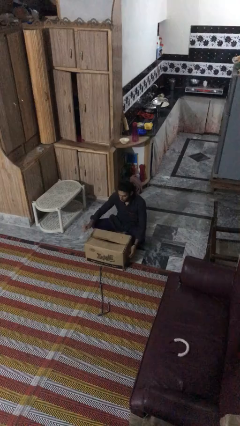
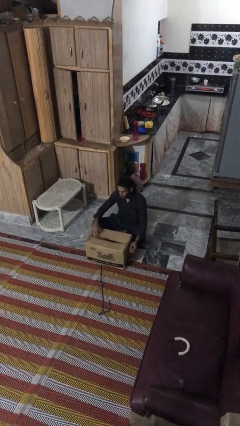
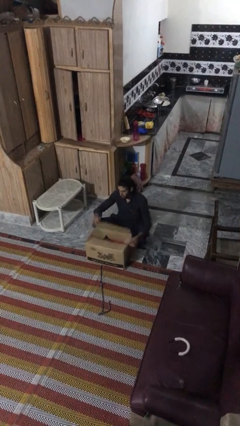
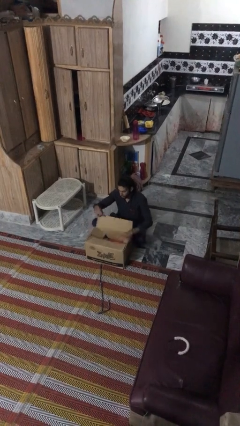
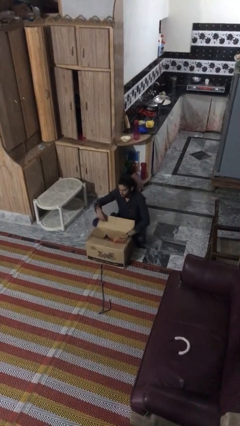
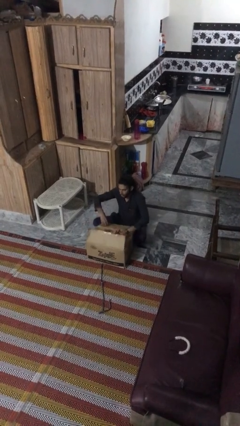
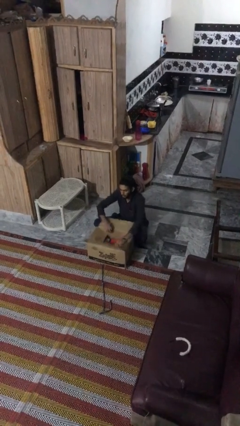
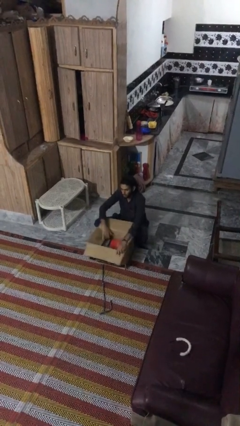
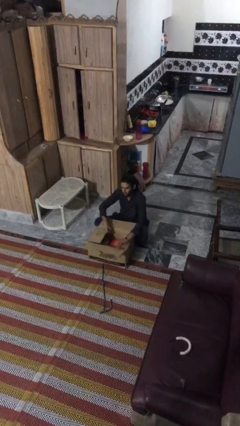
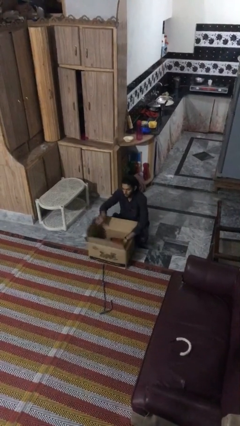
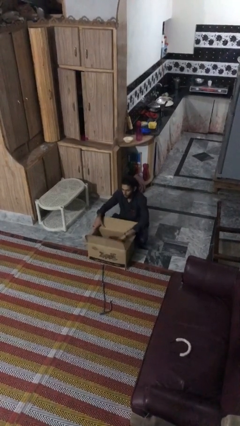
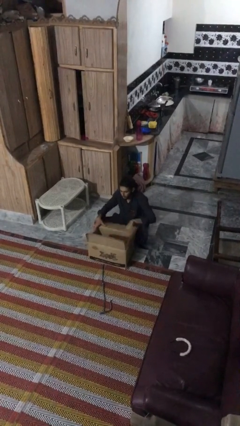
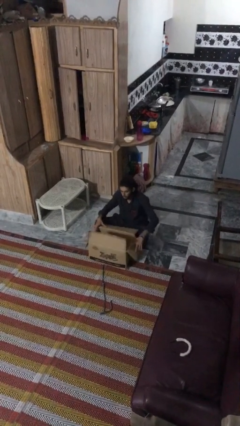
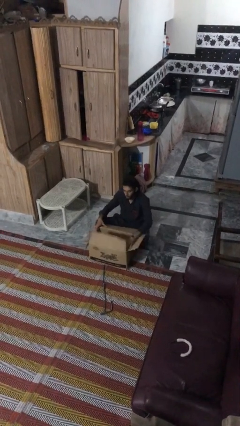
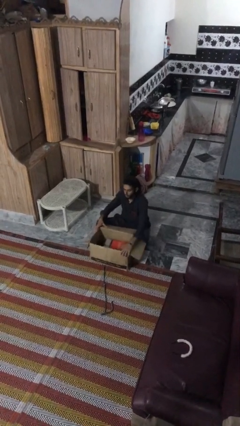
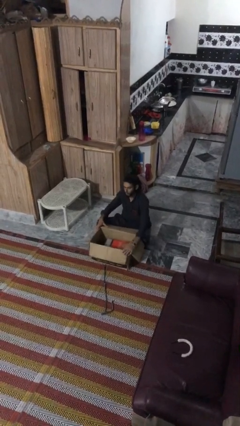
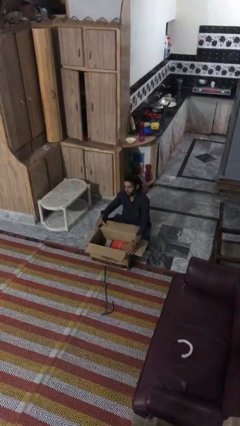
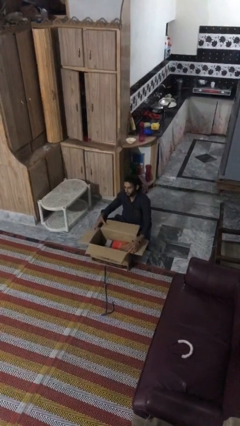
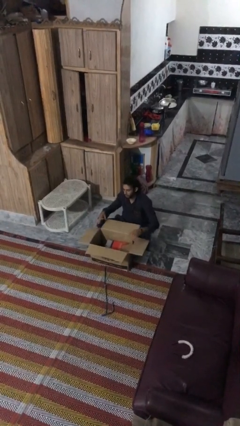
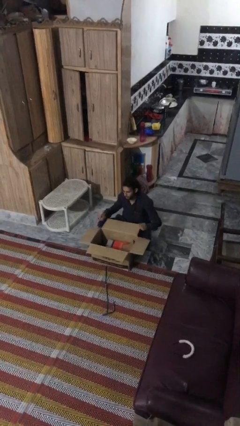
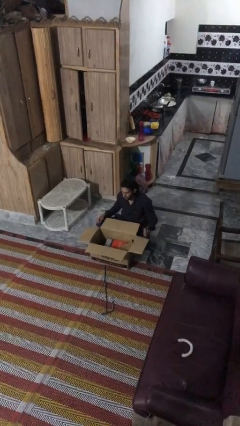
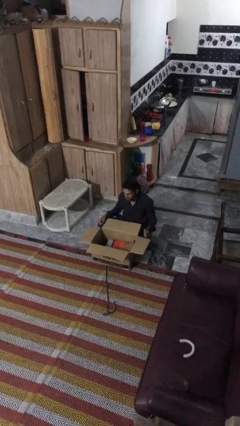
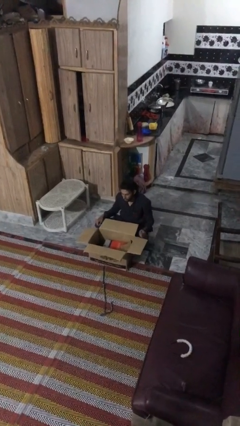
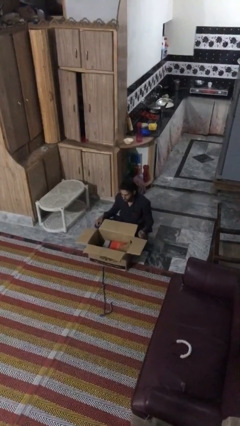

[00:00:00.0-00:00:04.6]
person opens box

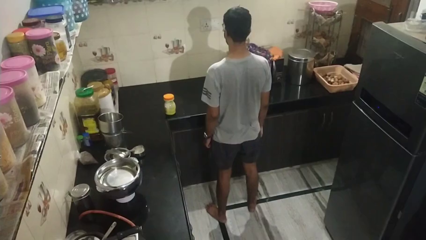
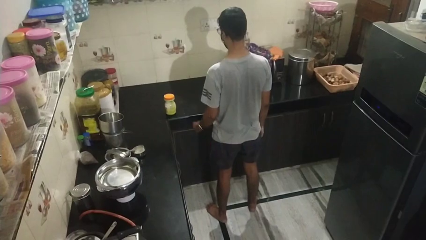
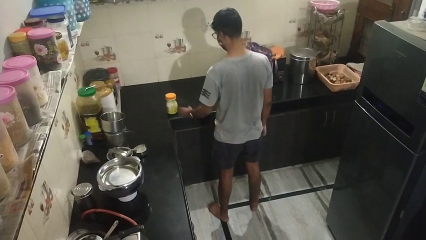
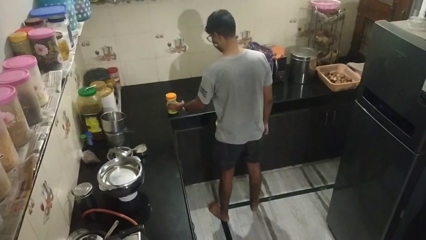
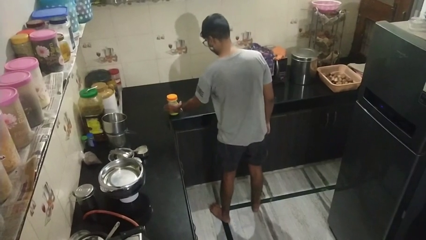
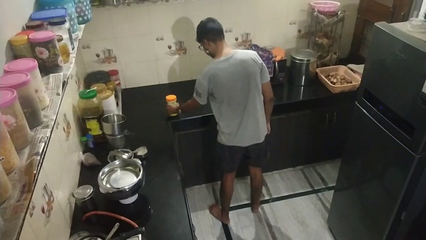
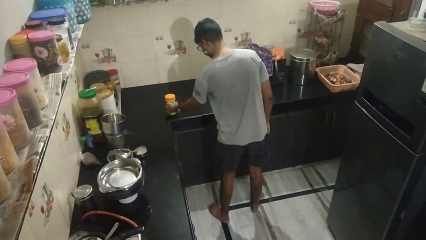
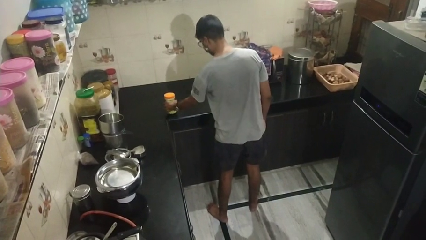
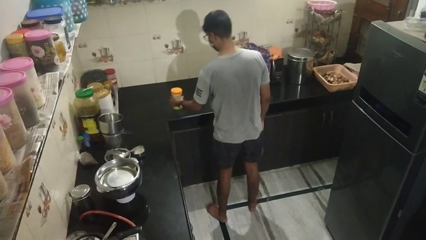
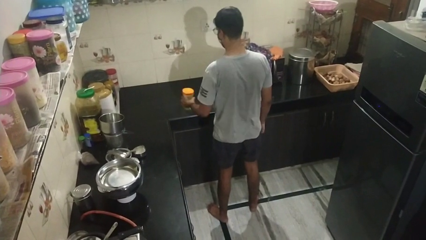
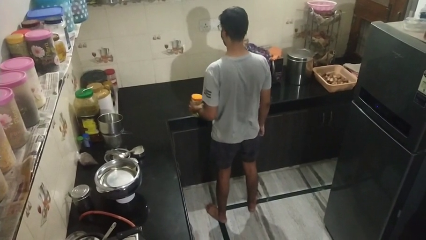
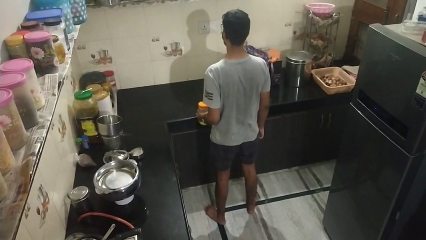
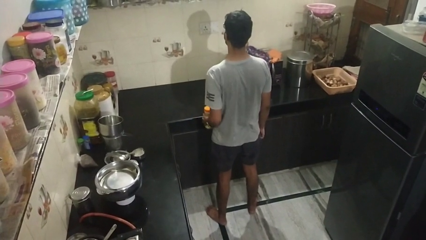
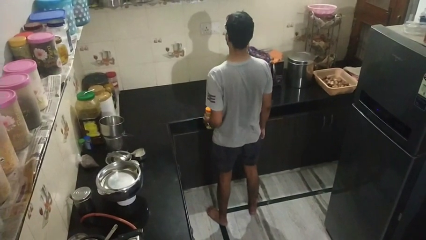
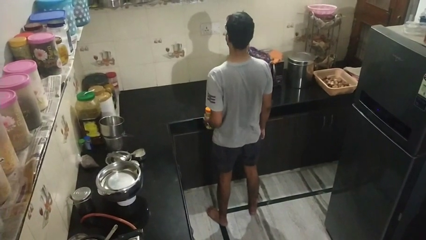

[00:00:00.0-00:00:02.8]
person picks up object from countertop

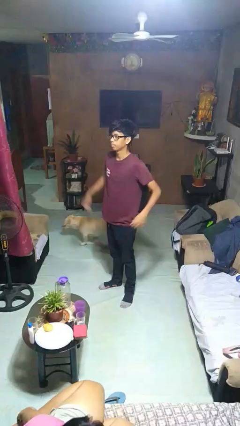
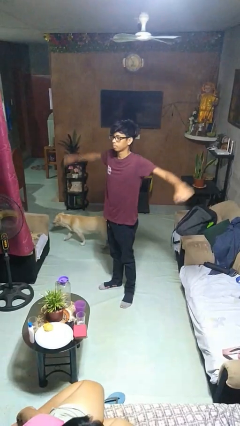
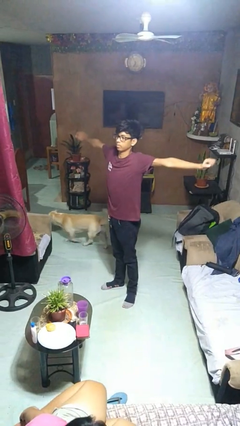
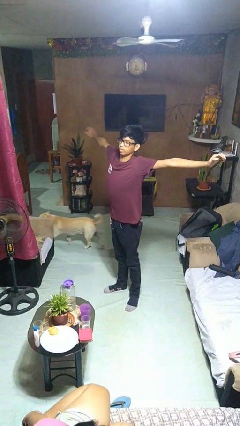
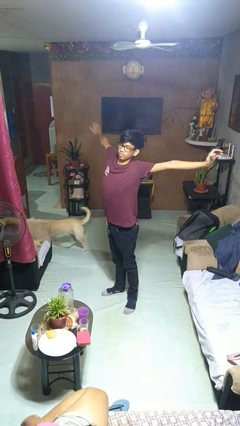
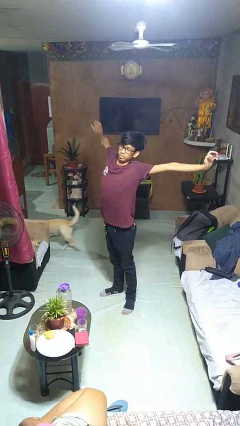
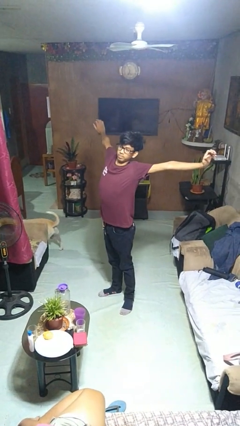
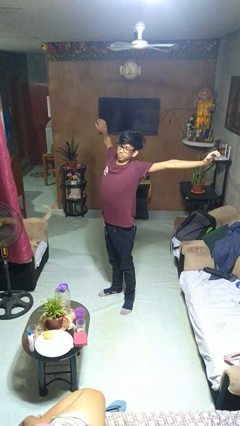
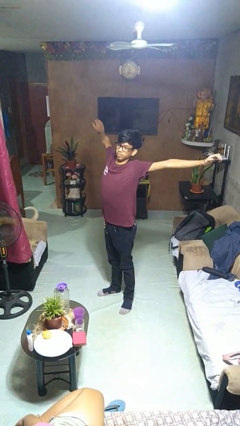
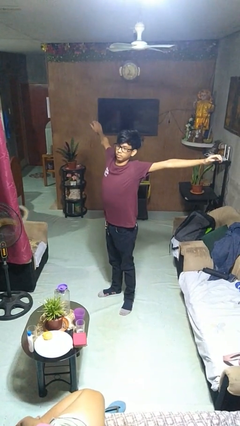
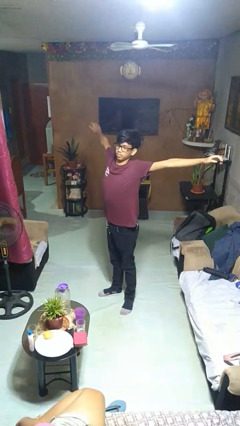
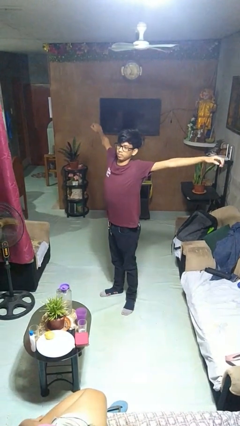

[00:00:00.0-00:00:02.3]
person stretches arms to side

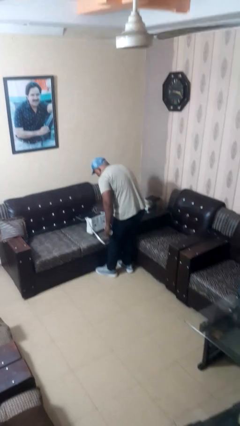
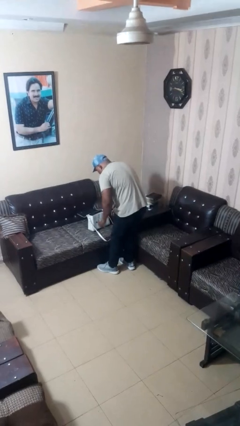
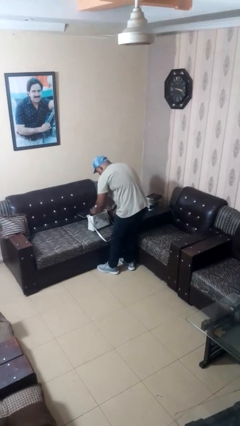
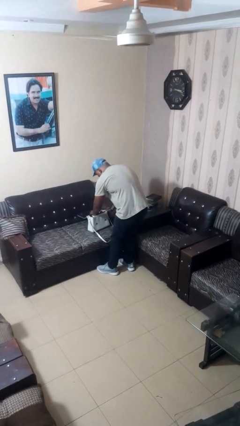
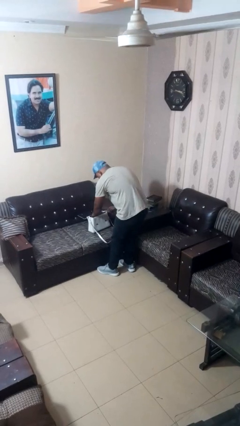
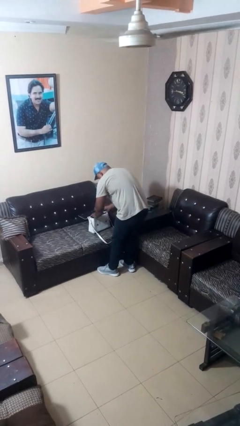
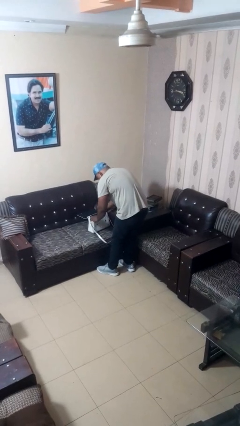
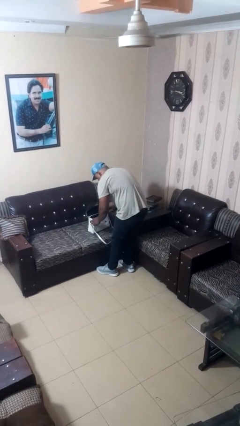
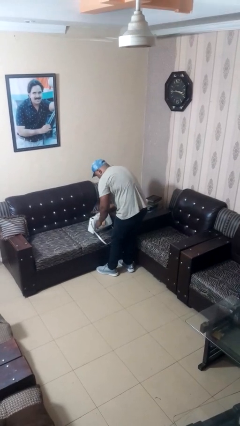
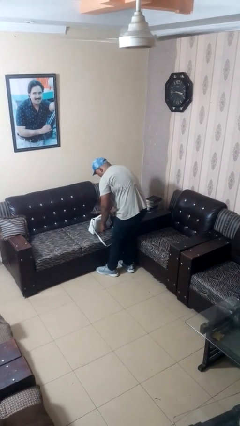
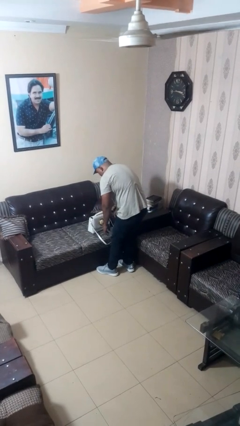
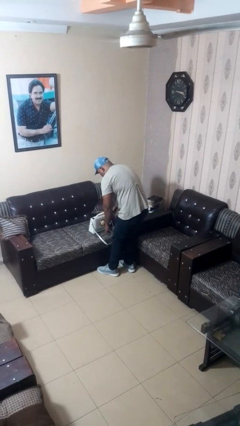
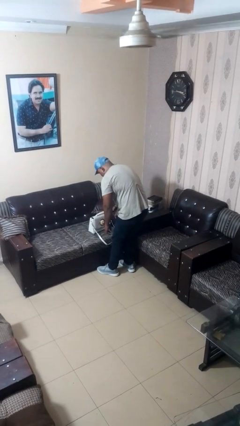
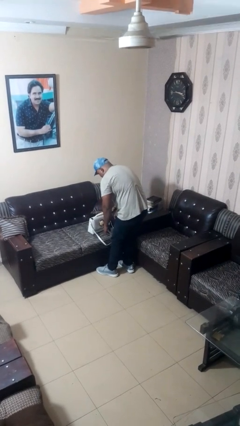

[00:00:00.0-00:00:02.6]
person puts object into purse

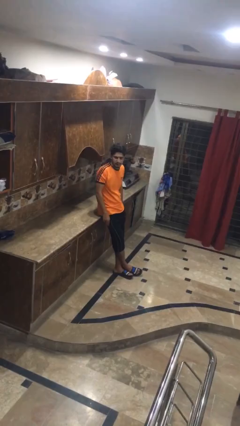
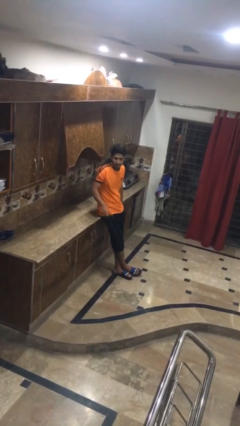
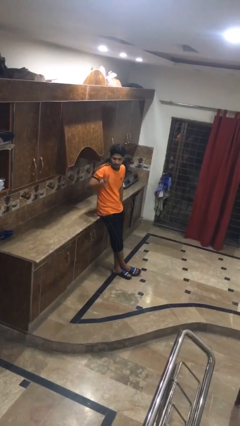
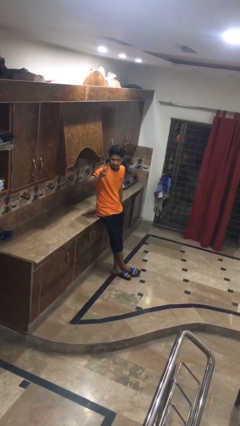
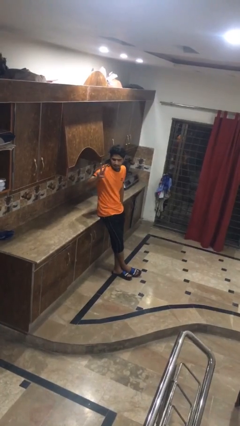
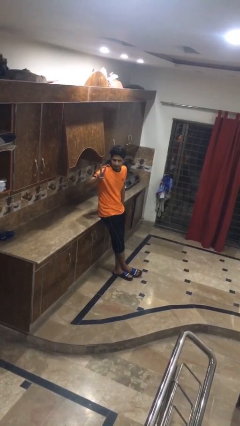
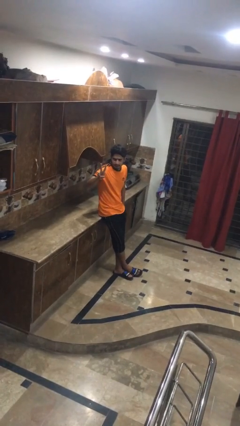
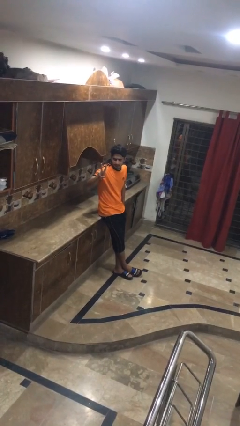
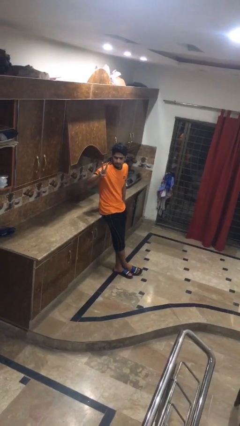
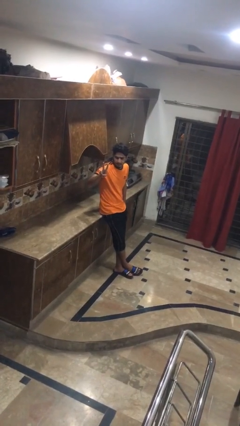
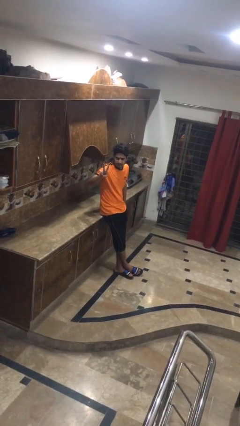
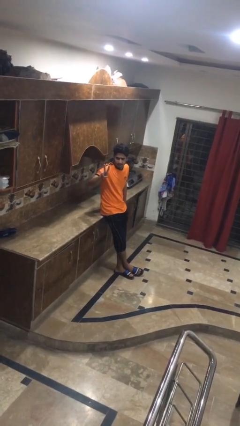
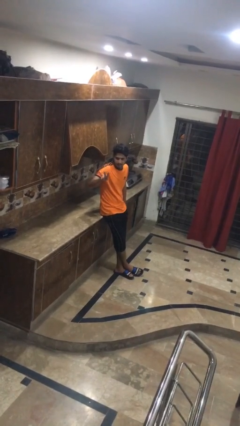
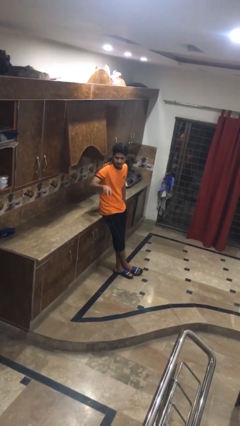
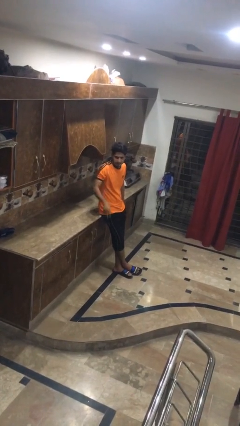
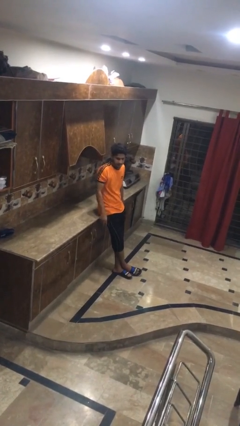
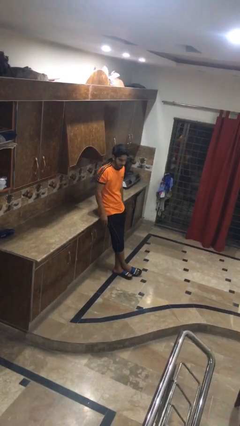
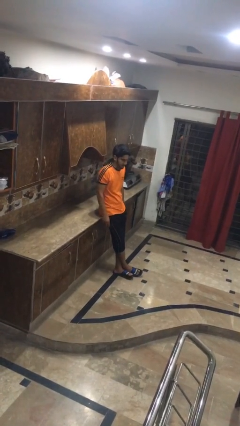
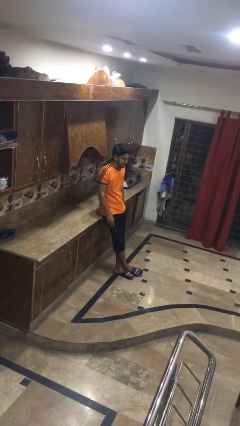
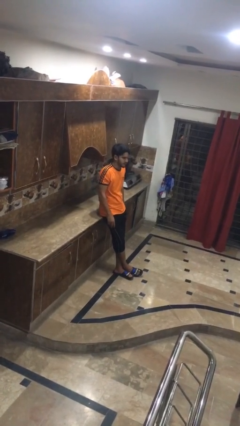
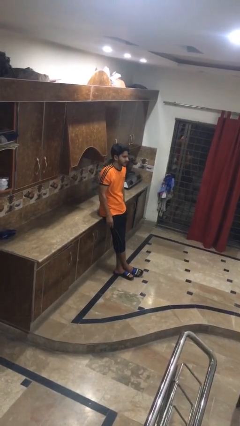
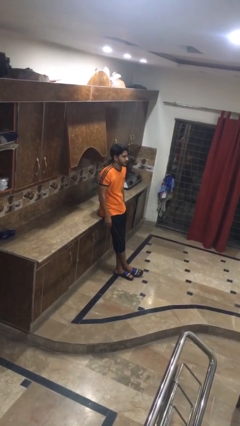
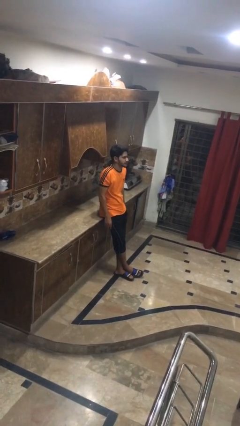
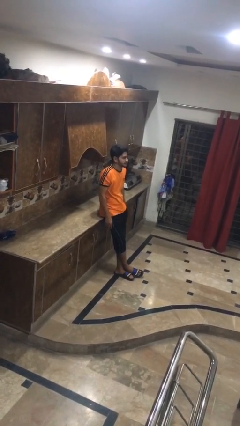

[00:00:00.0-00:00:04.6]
person gestures peace

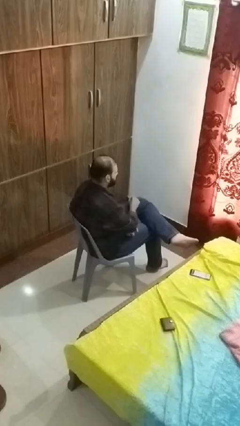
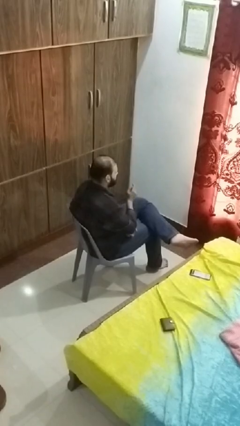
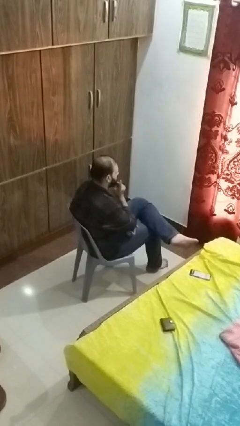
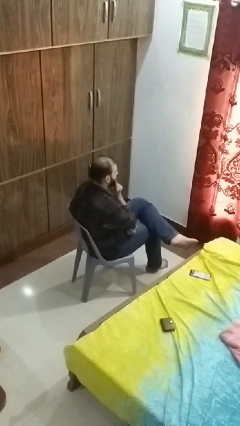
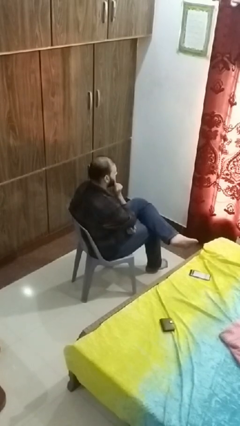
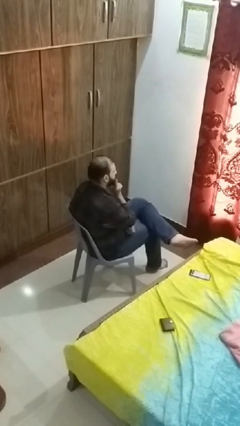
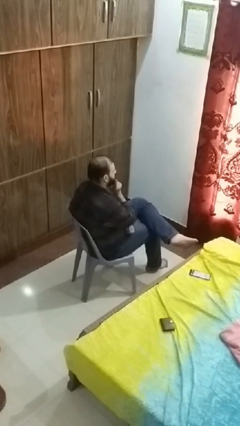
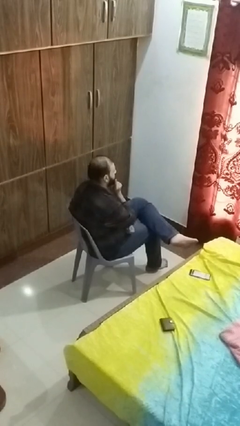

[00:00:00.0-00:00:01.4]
person strokes chin
